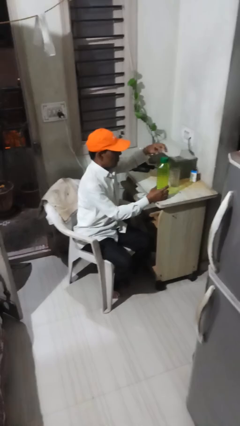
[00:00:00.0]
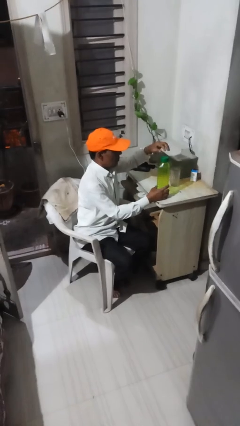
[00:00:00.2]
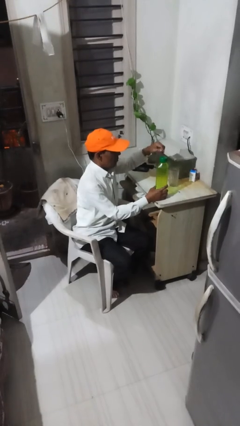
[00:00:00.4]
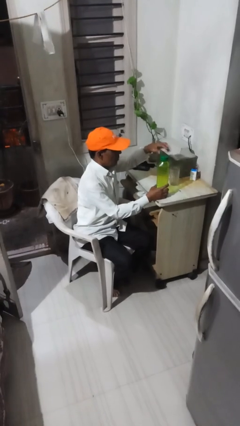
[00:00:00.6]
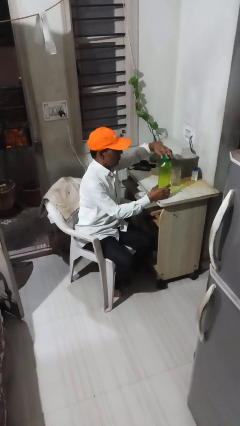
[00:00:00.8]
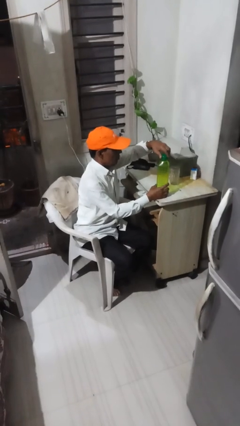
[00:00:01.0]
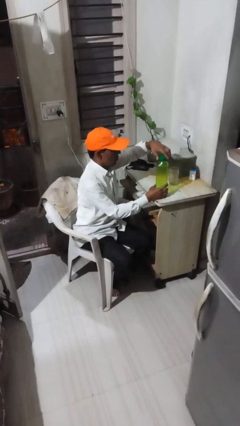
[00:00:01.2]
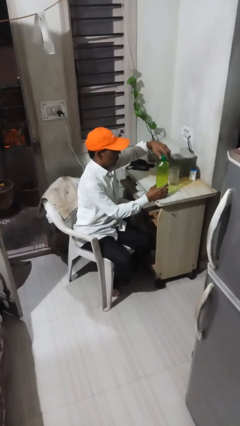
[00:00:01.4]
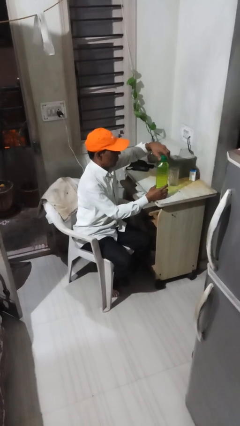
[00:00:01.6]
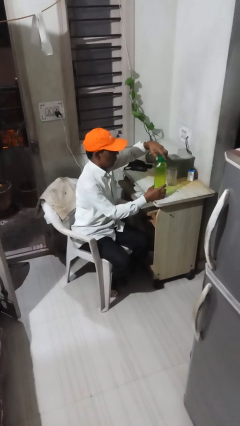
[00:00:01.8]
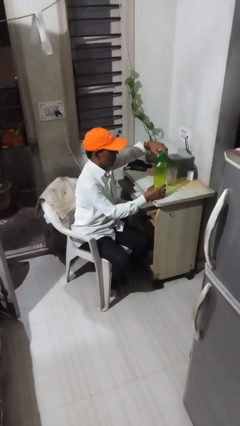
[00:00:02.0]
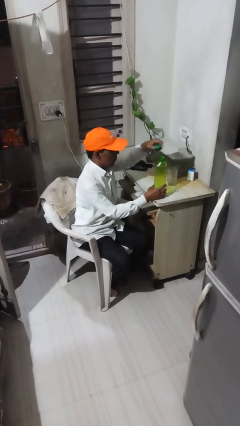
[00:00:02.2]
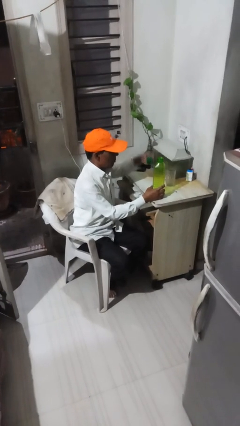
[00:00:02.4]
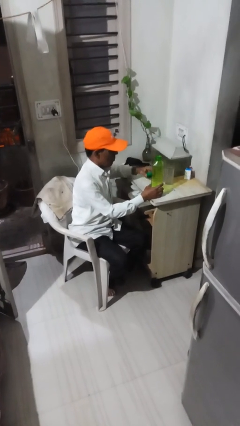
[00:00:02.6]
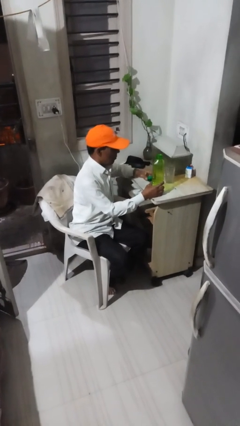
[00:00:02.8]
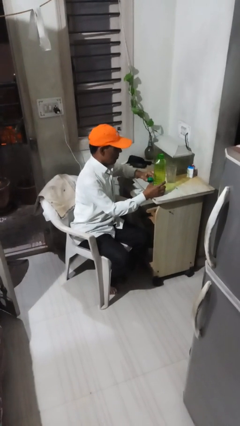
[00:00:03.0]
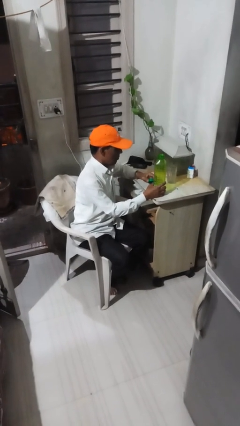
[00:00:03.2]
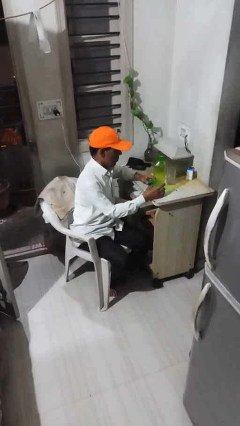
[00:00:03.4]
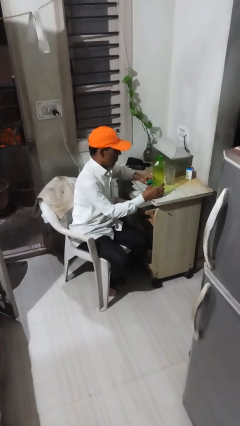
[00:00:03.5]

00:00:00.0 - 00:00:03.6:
person unscrews lid from bottle

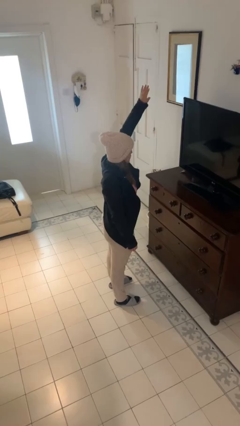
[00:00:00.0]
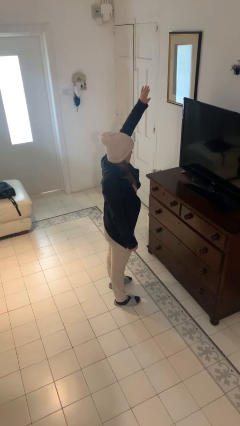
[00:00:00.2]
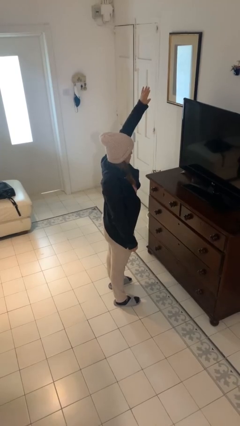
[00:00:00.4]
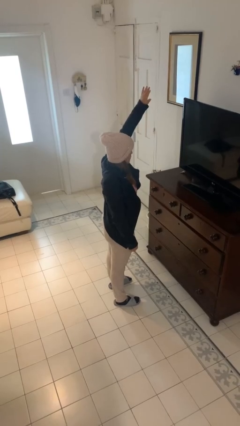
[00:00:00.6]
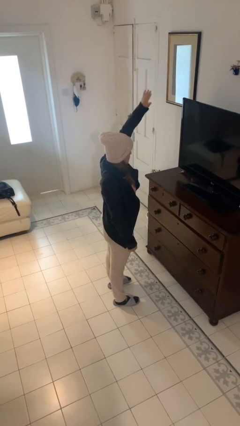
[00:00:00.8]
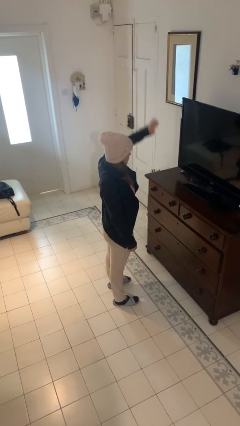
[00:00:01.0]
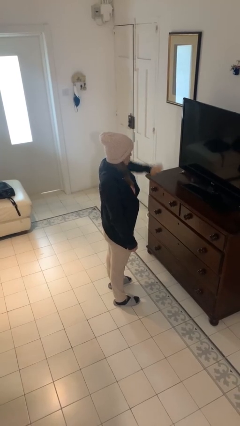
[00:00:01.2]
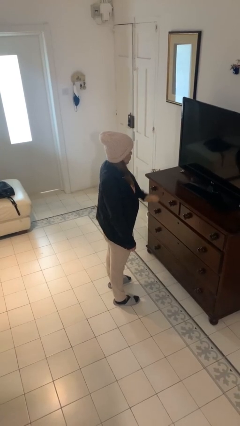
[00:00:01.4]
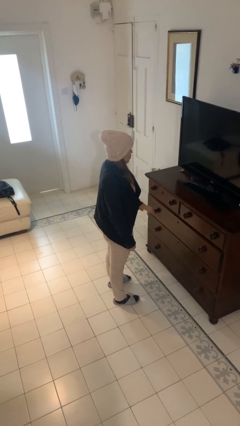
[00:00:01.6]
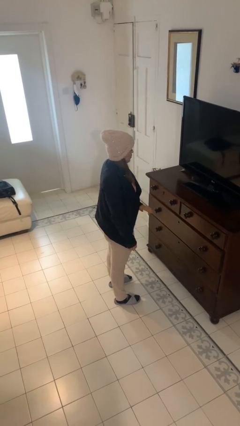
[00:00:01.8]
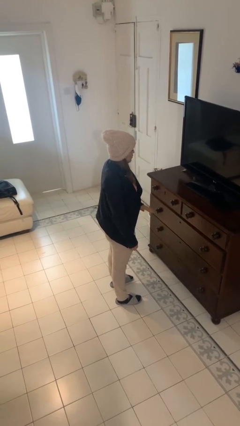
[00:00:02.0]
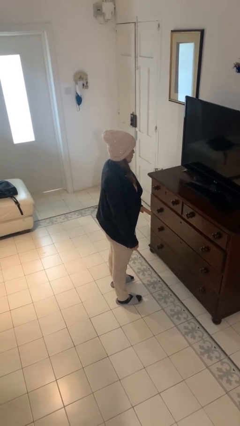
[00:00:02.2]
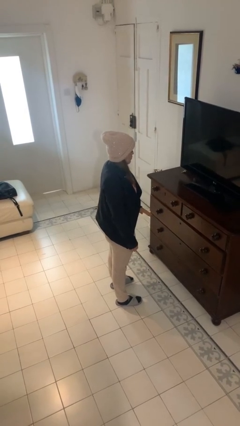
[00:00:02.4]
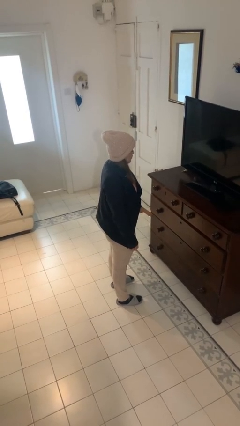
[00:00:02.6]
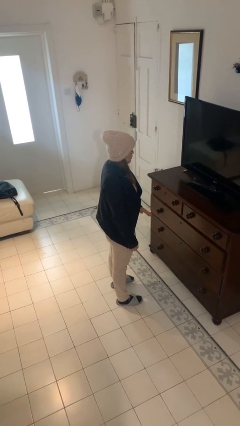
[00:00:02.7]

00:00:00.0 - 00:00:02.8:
person gestures swipe down

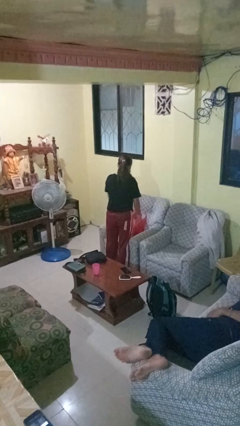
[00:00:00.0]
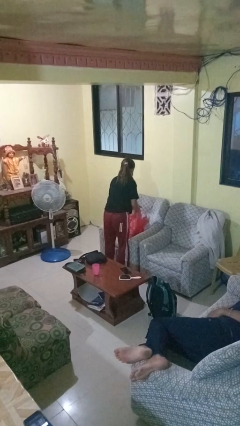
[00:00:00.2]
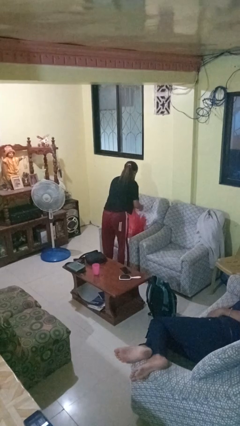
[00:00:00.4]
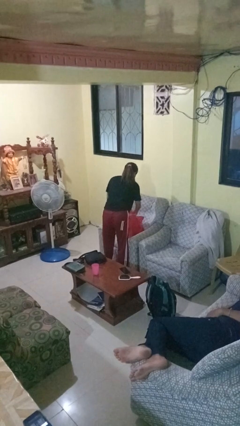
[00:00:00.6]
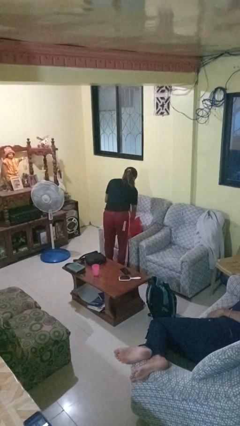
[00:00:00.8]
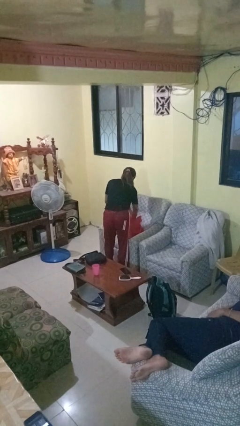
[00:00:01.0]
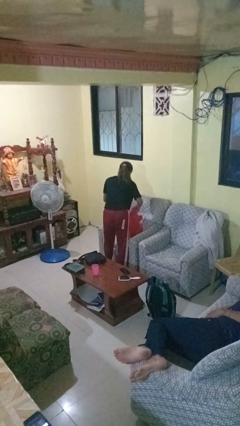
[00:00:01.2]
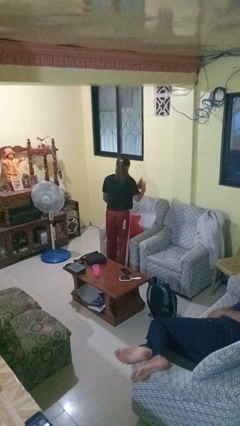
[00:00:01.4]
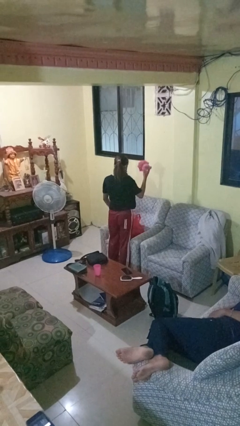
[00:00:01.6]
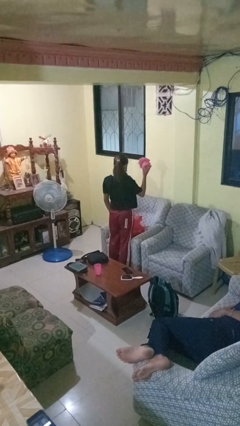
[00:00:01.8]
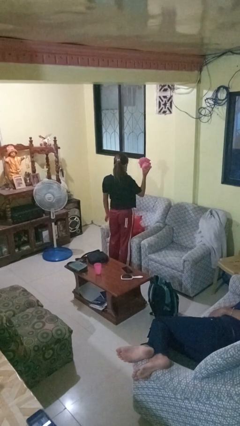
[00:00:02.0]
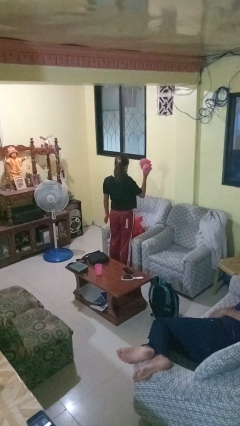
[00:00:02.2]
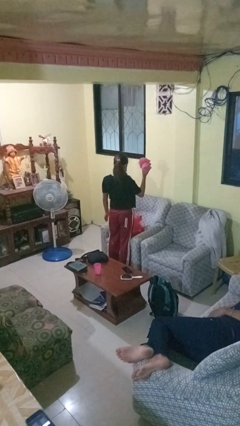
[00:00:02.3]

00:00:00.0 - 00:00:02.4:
person takes object from bag

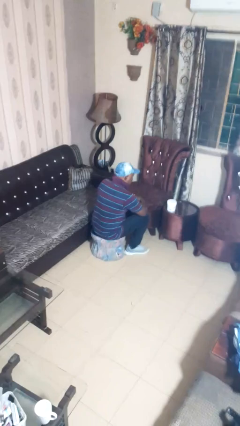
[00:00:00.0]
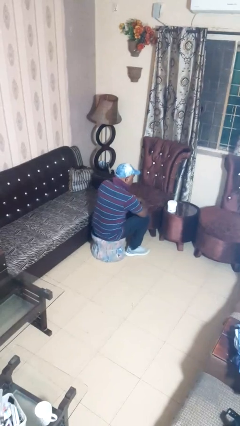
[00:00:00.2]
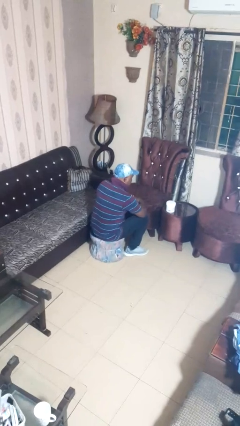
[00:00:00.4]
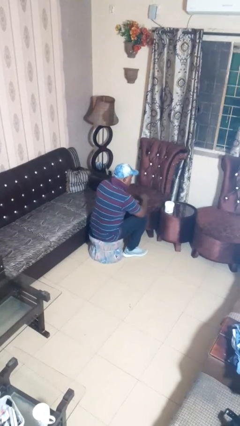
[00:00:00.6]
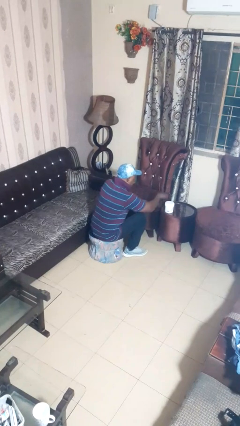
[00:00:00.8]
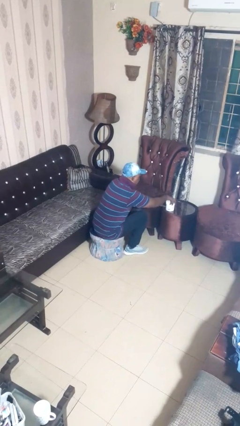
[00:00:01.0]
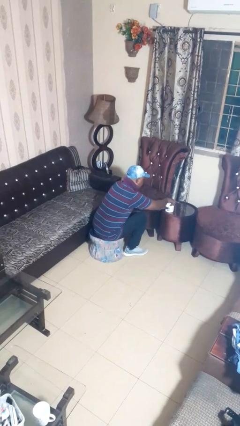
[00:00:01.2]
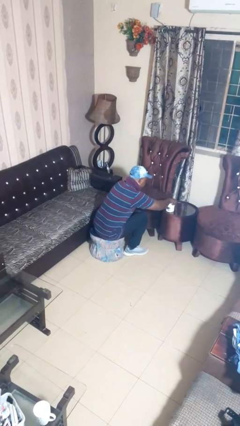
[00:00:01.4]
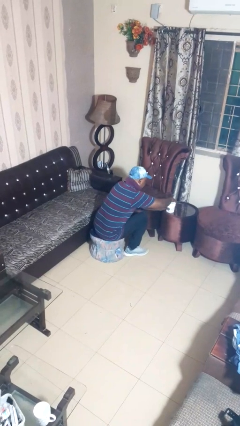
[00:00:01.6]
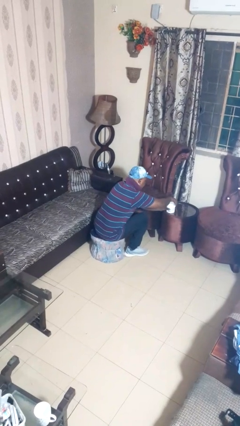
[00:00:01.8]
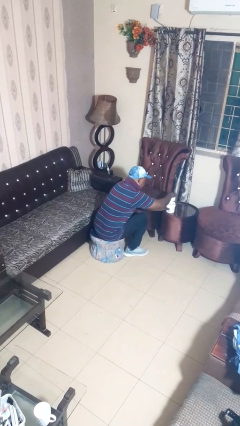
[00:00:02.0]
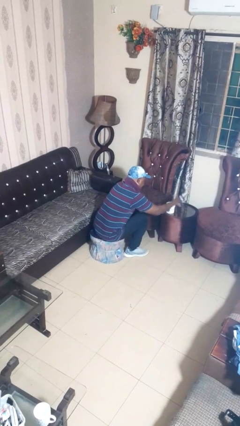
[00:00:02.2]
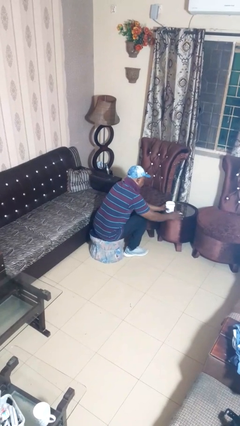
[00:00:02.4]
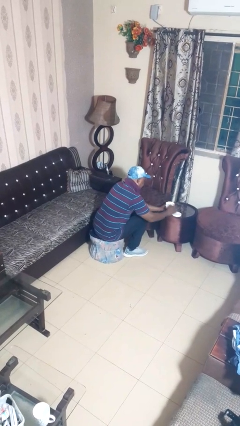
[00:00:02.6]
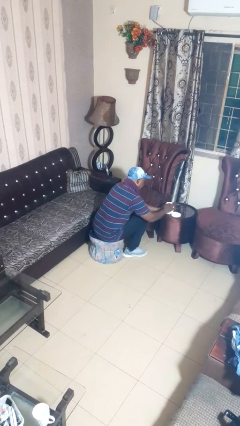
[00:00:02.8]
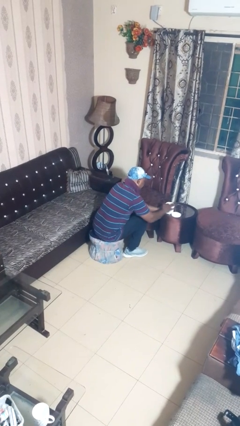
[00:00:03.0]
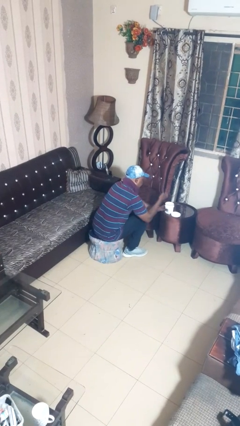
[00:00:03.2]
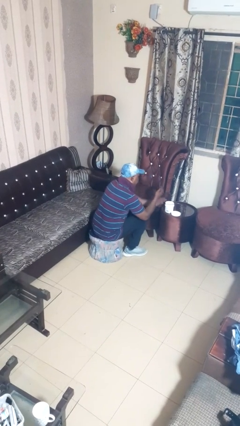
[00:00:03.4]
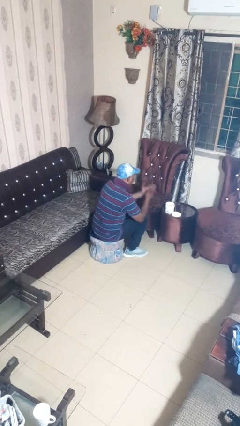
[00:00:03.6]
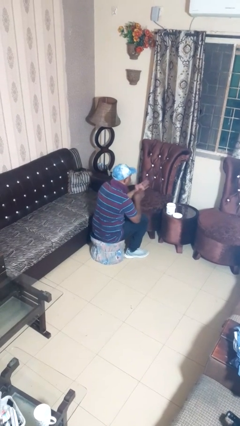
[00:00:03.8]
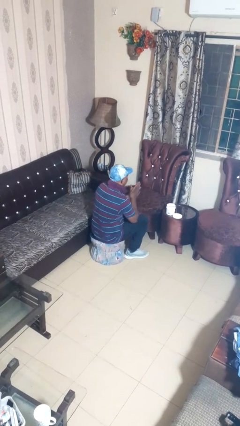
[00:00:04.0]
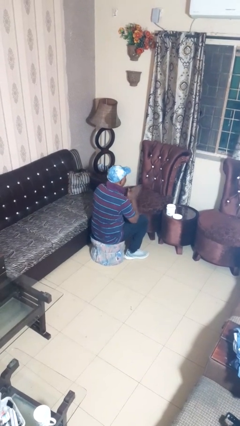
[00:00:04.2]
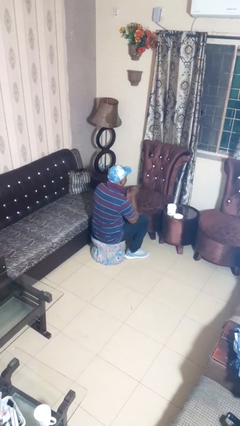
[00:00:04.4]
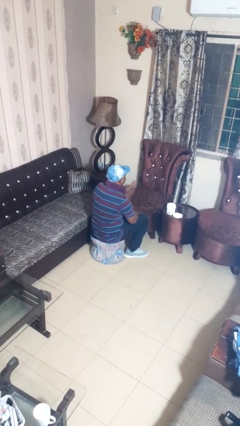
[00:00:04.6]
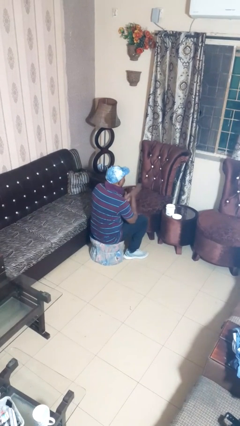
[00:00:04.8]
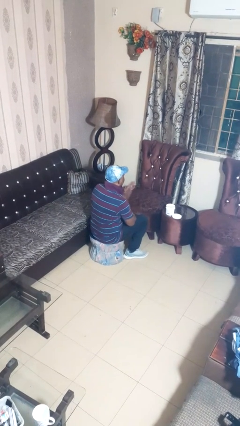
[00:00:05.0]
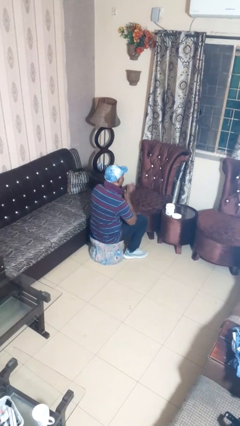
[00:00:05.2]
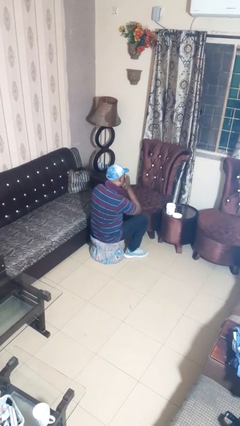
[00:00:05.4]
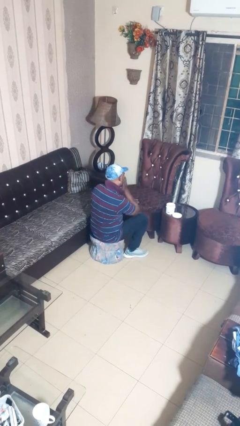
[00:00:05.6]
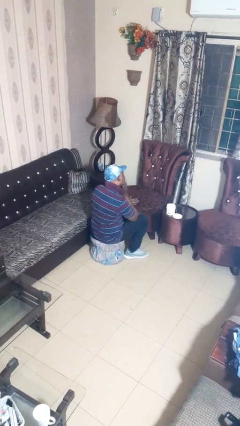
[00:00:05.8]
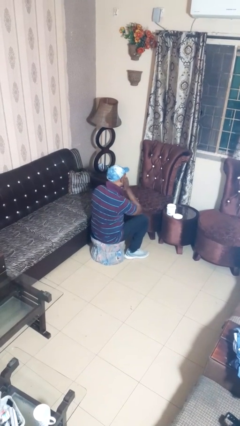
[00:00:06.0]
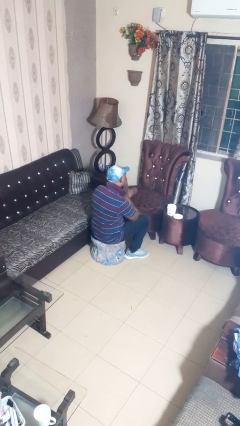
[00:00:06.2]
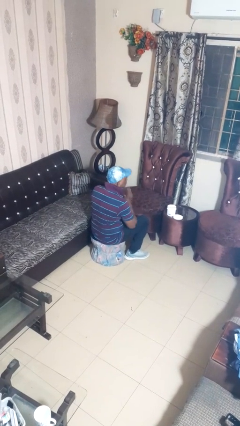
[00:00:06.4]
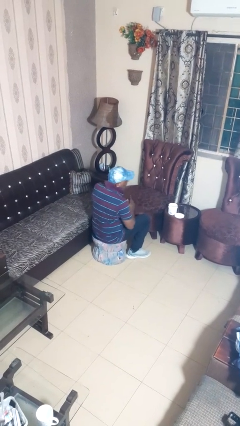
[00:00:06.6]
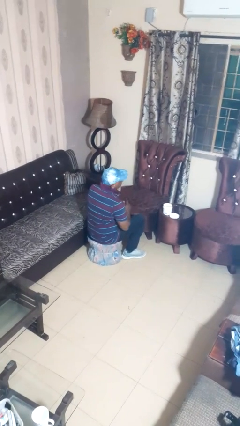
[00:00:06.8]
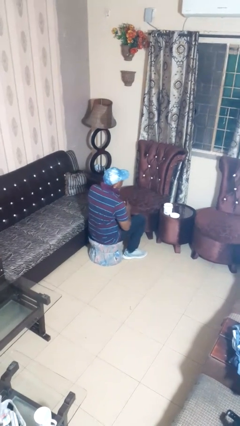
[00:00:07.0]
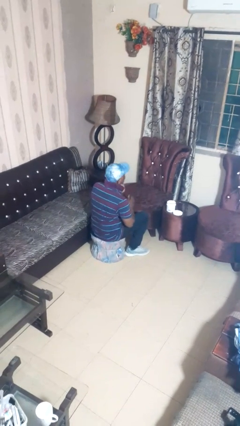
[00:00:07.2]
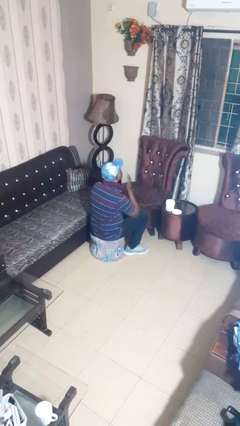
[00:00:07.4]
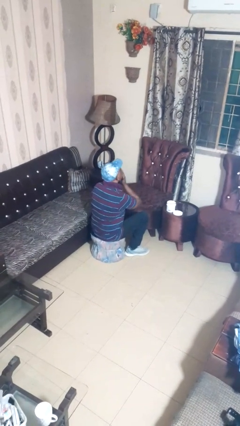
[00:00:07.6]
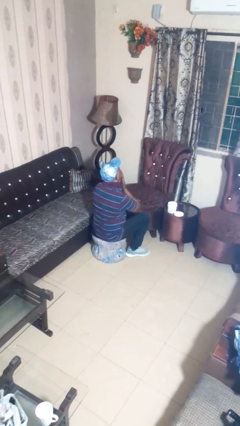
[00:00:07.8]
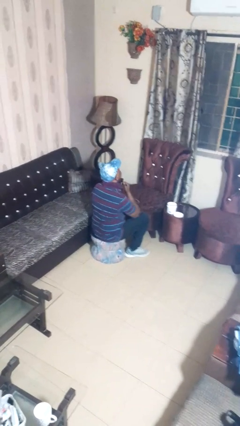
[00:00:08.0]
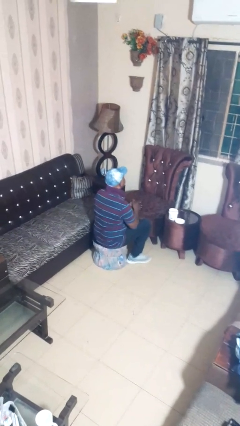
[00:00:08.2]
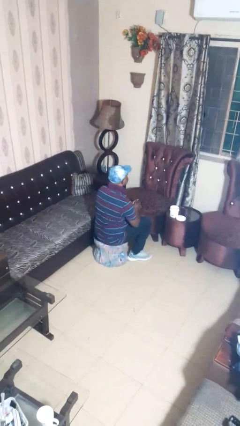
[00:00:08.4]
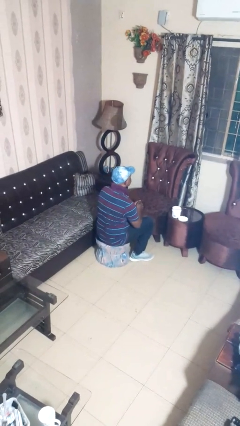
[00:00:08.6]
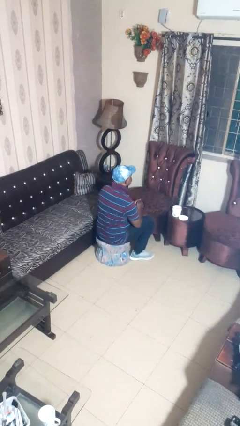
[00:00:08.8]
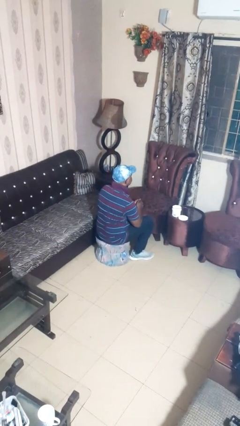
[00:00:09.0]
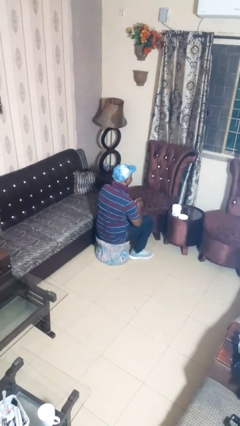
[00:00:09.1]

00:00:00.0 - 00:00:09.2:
person applies facial moisturizer
